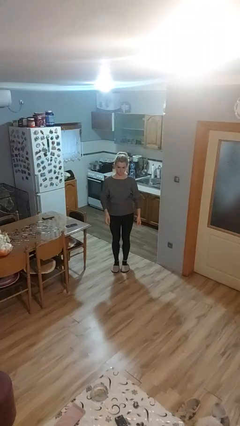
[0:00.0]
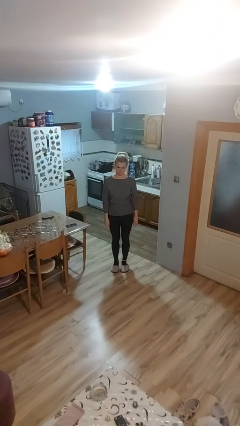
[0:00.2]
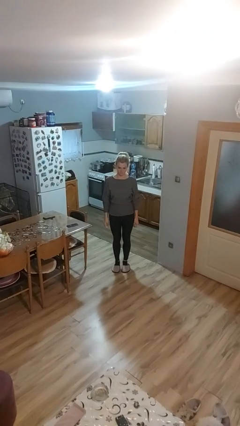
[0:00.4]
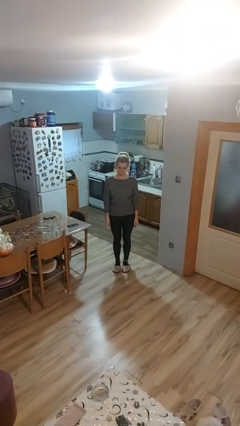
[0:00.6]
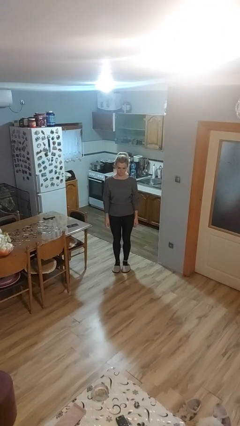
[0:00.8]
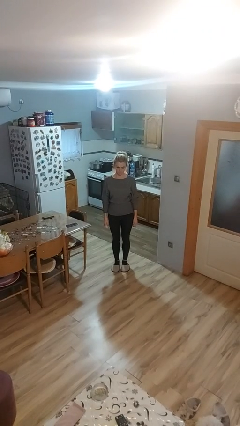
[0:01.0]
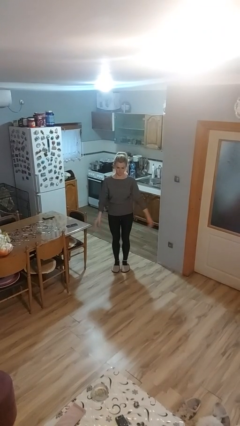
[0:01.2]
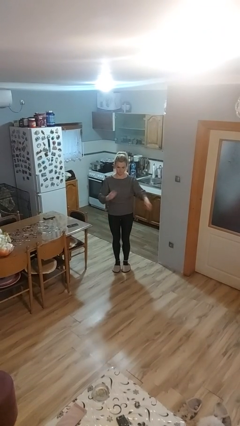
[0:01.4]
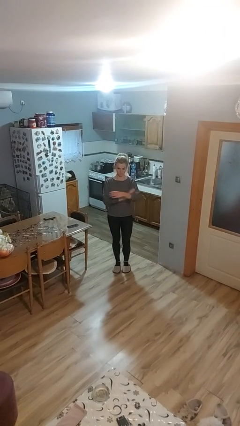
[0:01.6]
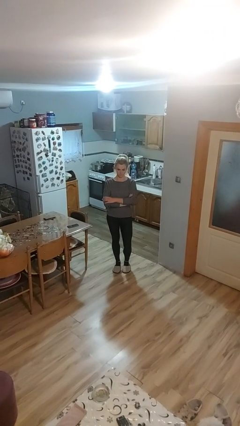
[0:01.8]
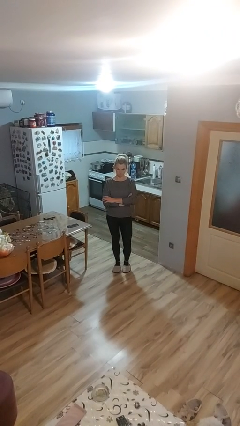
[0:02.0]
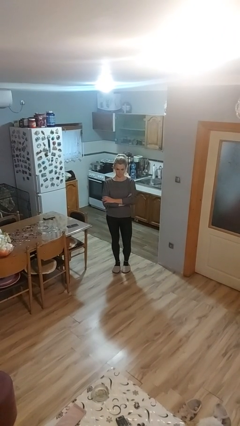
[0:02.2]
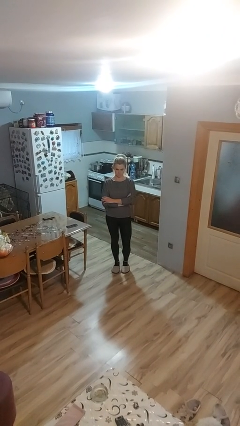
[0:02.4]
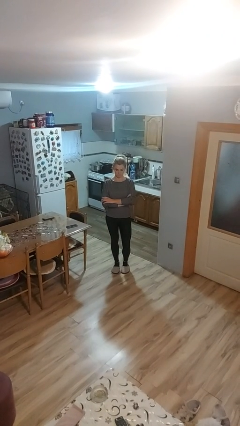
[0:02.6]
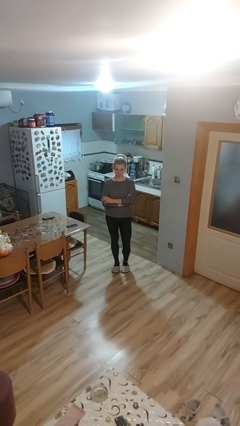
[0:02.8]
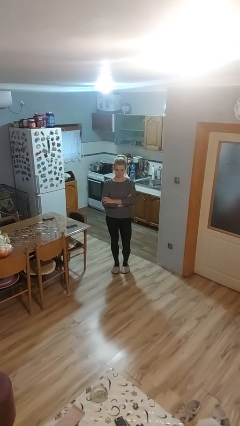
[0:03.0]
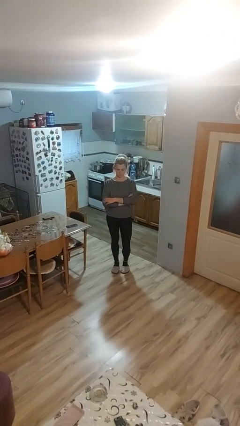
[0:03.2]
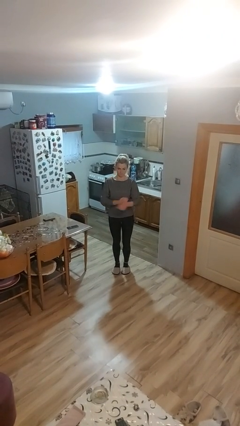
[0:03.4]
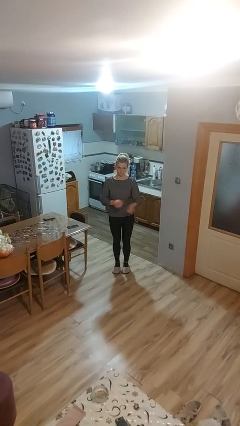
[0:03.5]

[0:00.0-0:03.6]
person crosses arms

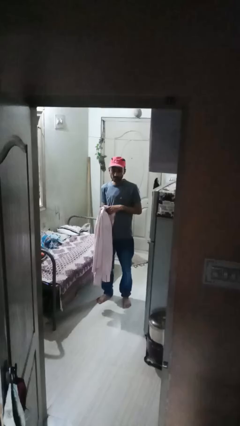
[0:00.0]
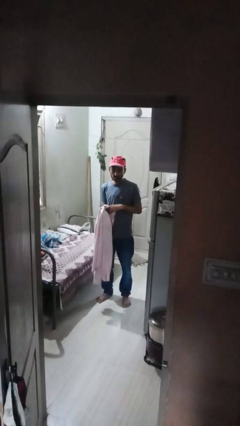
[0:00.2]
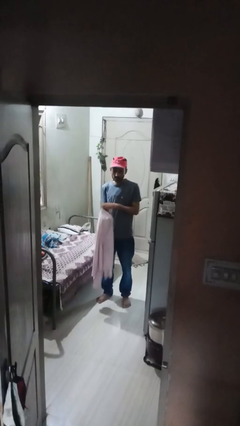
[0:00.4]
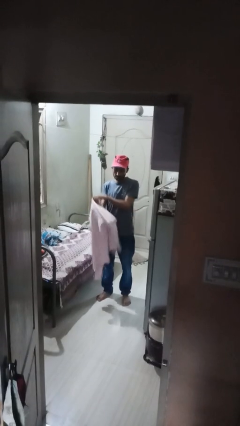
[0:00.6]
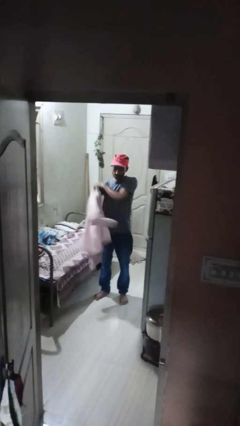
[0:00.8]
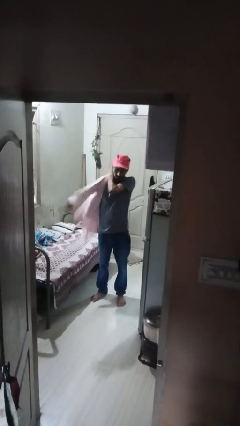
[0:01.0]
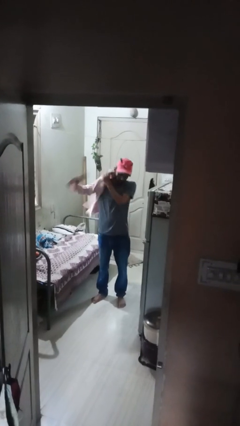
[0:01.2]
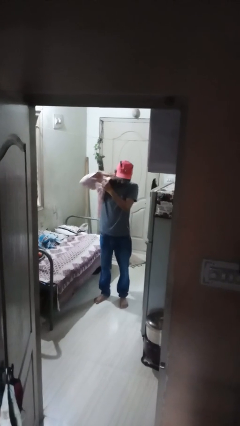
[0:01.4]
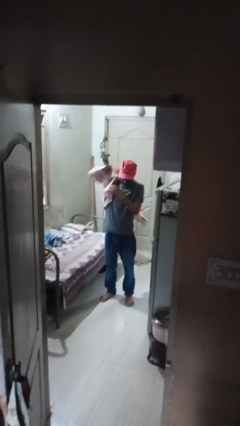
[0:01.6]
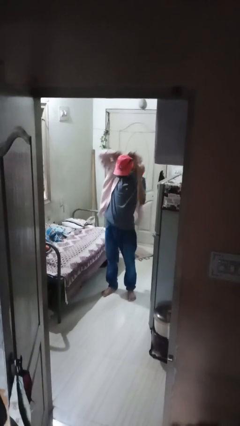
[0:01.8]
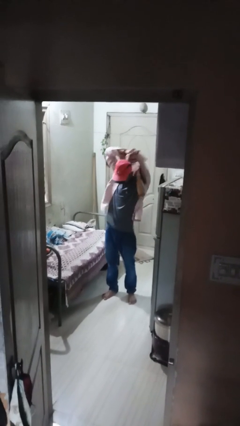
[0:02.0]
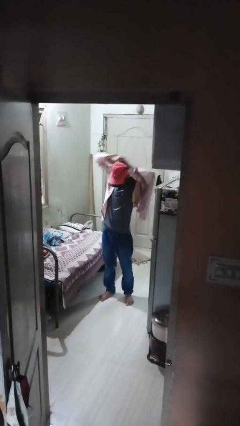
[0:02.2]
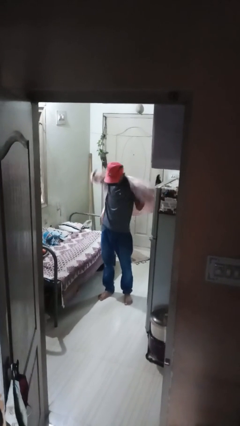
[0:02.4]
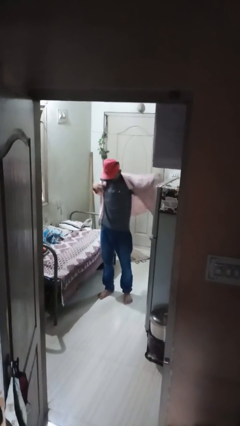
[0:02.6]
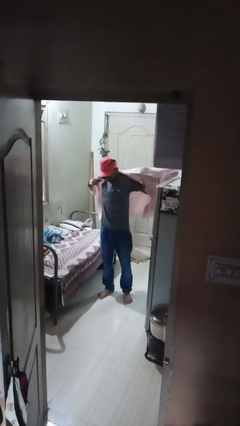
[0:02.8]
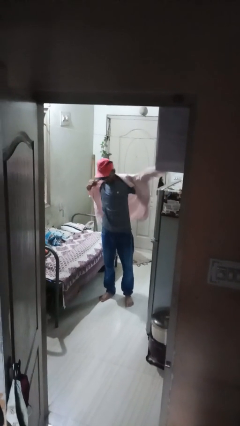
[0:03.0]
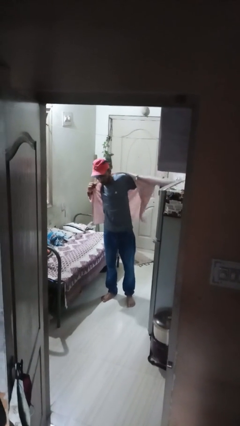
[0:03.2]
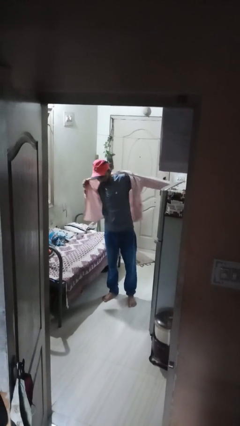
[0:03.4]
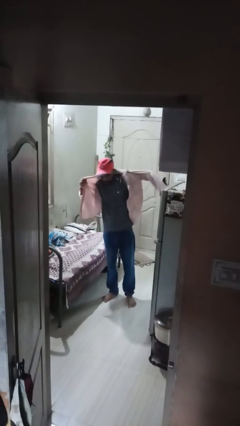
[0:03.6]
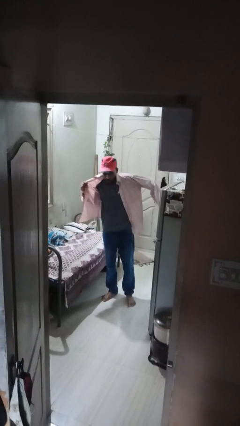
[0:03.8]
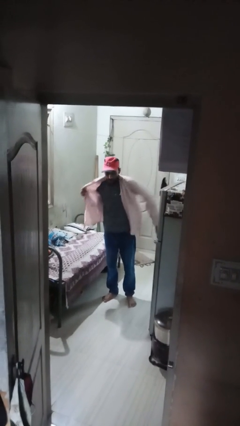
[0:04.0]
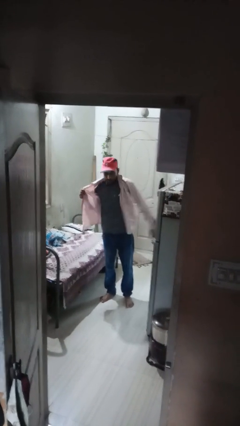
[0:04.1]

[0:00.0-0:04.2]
person puts on shirt

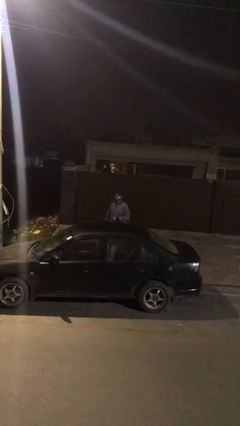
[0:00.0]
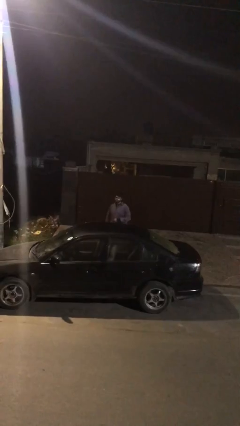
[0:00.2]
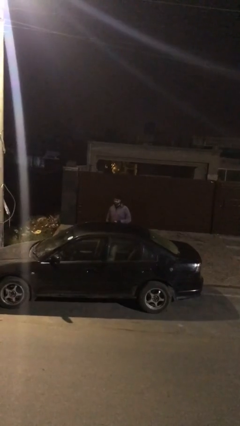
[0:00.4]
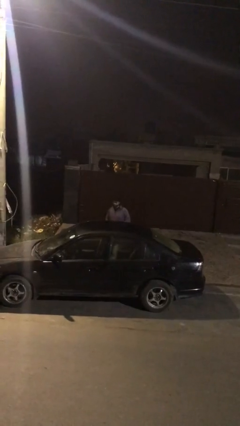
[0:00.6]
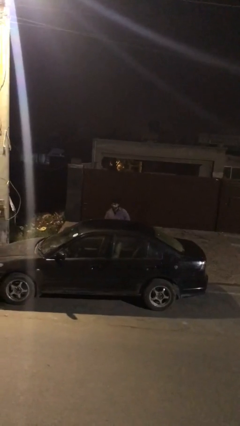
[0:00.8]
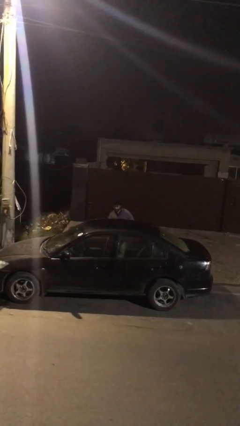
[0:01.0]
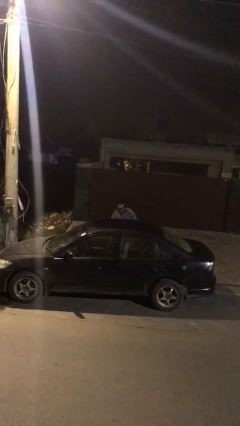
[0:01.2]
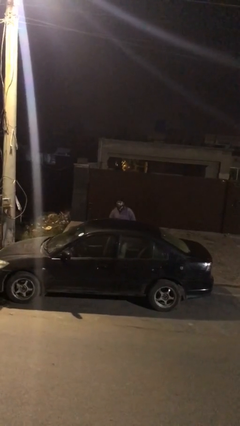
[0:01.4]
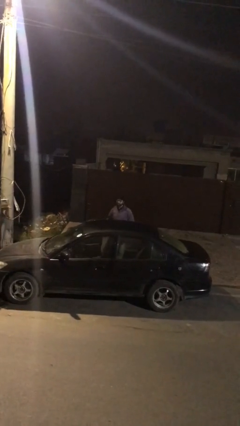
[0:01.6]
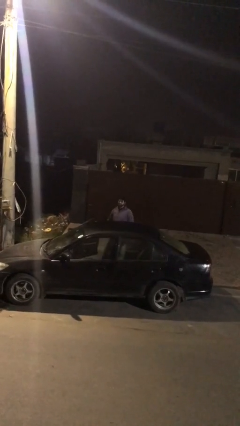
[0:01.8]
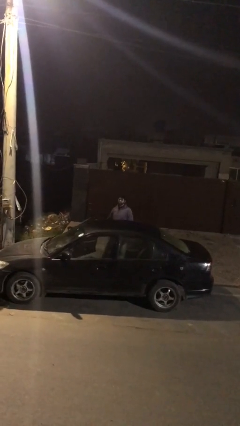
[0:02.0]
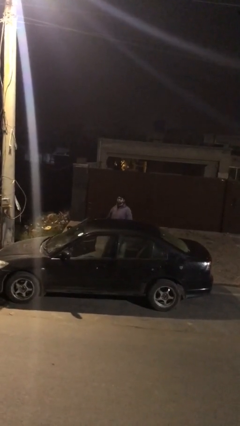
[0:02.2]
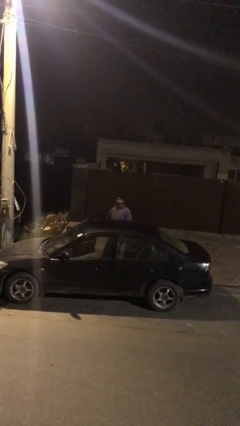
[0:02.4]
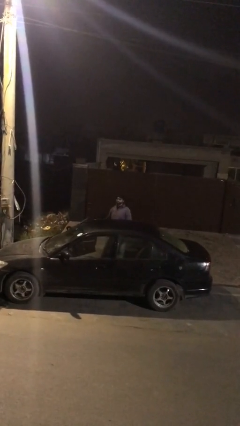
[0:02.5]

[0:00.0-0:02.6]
person opens car door

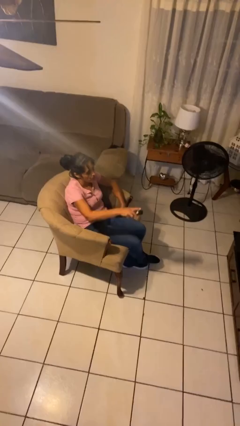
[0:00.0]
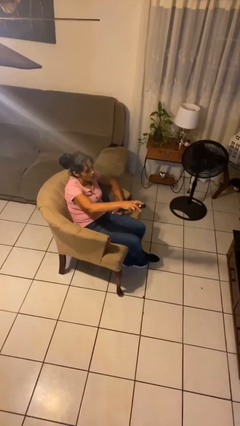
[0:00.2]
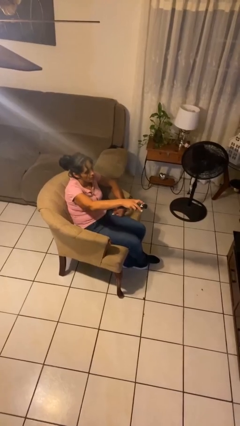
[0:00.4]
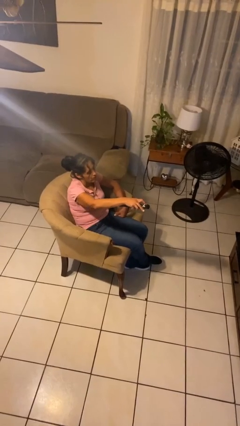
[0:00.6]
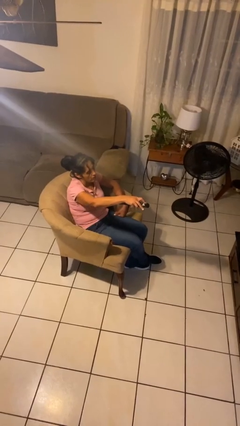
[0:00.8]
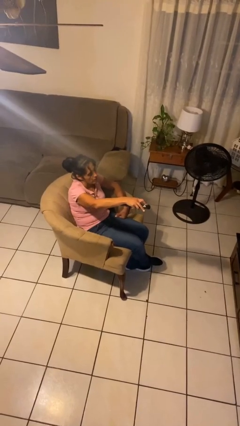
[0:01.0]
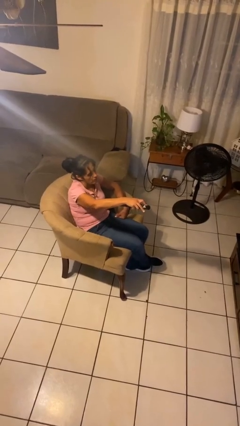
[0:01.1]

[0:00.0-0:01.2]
person uses television remote

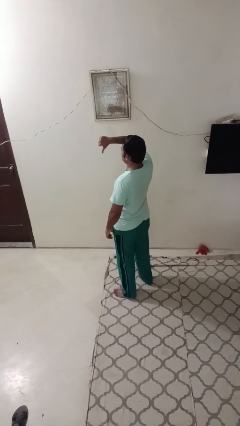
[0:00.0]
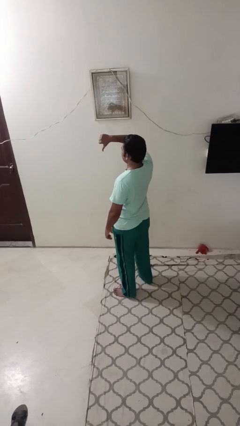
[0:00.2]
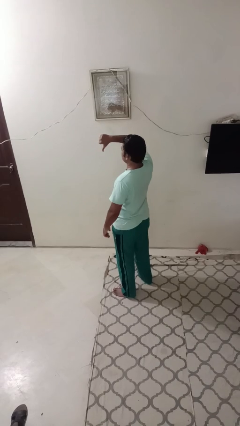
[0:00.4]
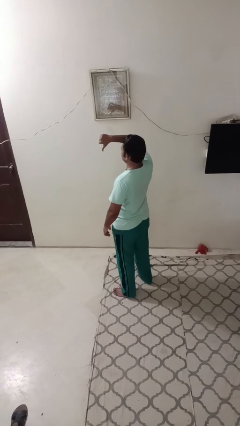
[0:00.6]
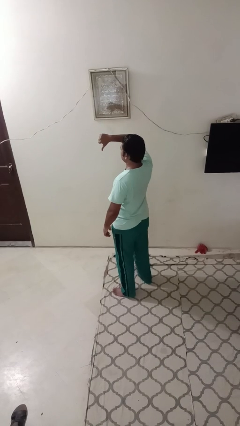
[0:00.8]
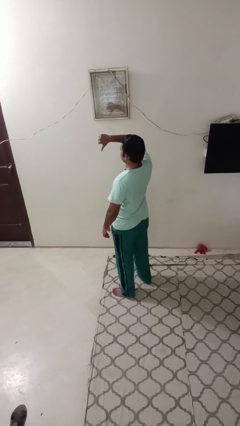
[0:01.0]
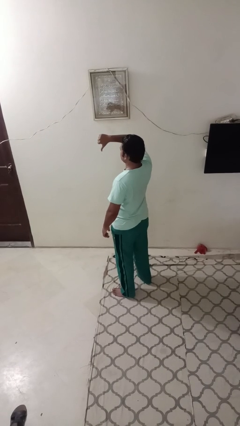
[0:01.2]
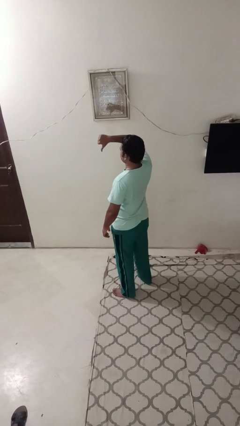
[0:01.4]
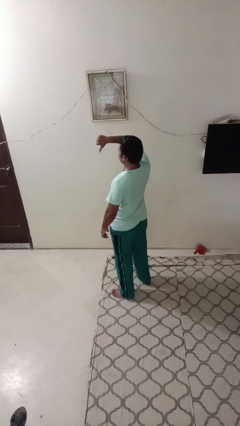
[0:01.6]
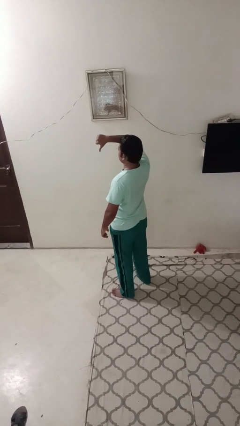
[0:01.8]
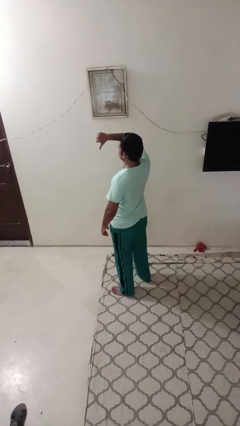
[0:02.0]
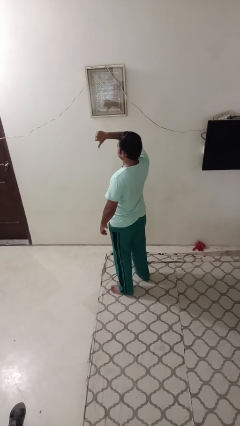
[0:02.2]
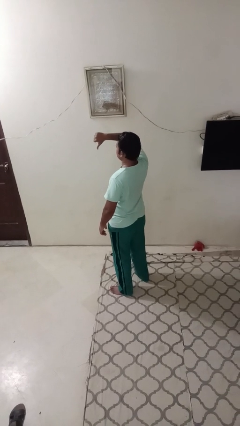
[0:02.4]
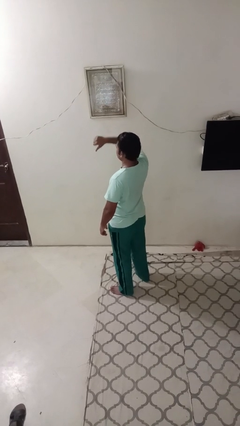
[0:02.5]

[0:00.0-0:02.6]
person gestures thumbs down

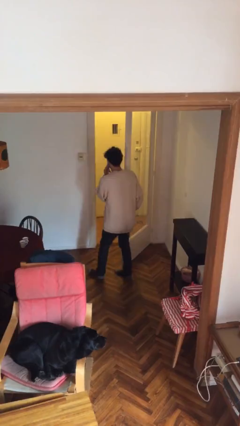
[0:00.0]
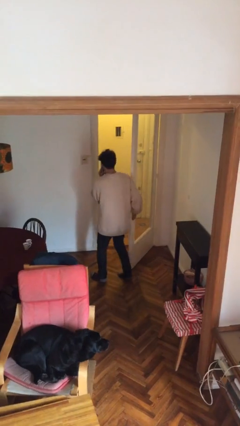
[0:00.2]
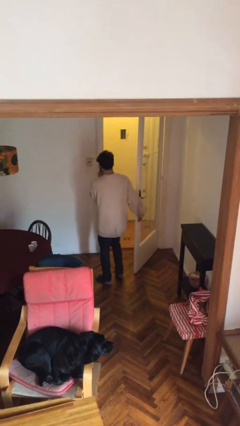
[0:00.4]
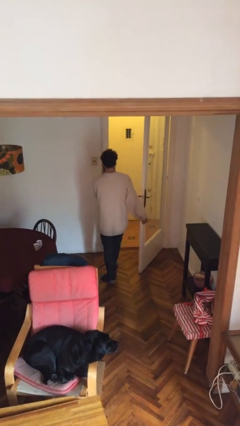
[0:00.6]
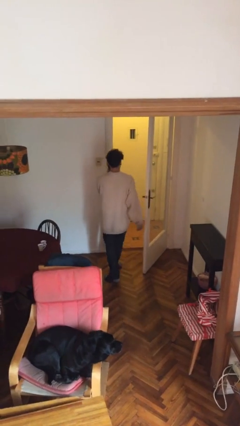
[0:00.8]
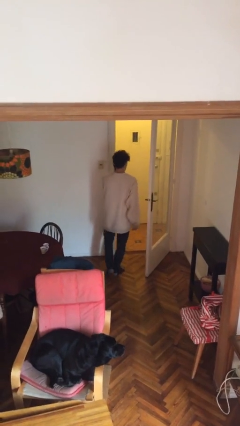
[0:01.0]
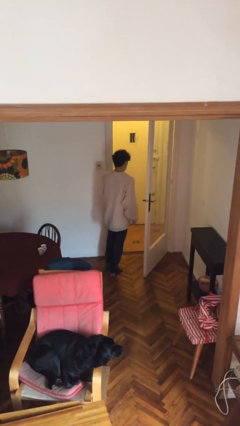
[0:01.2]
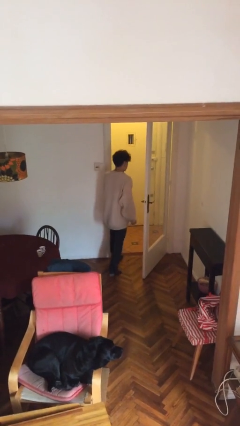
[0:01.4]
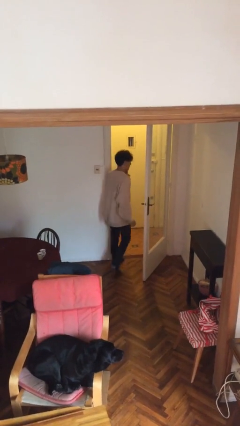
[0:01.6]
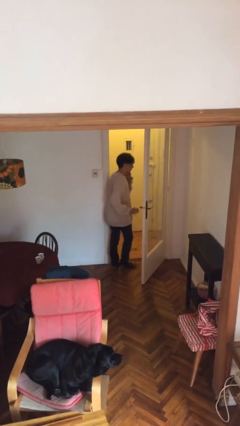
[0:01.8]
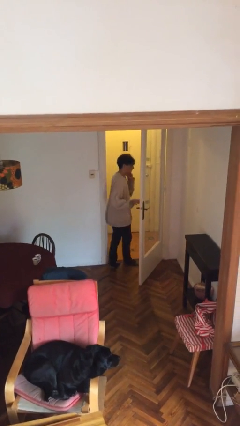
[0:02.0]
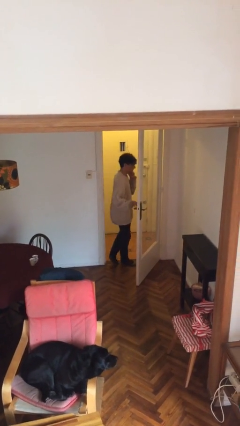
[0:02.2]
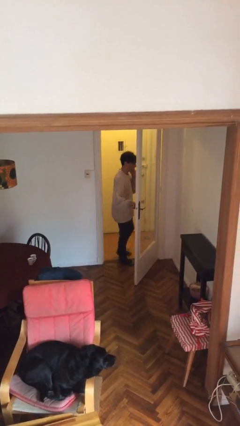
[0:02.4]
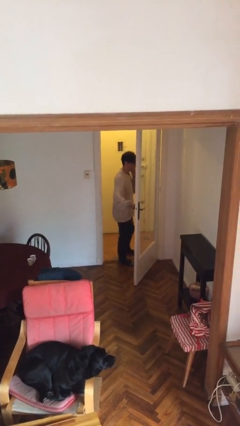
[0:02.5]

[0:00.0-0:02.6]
person exits scene through structure
